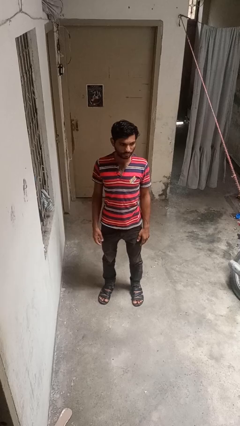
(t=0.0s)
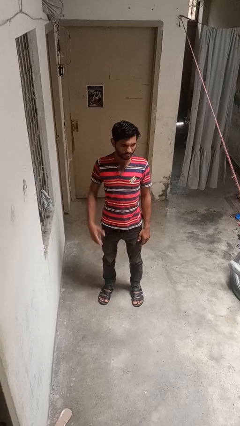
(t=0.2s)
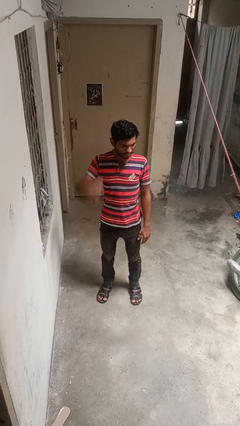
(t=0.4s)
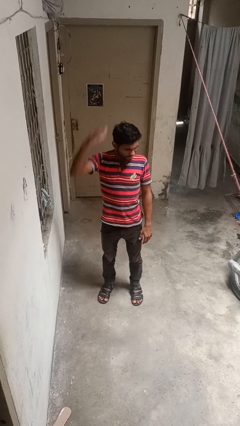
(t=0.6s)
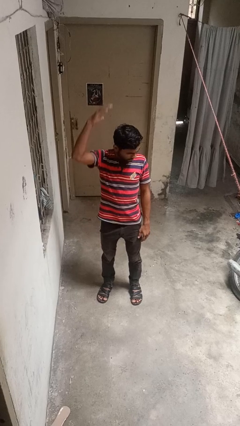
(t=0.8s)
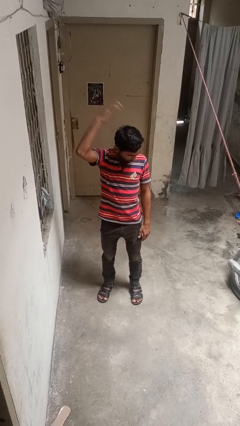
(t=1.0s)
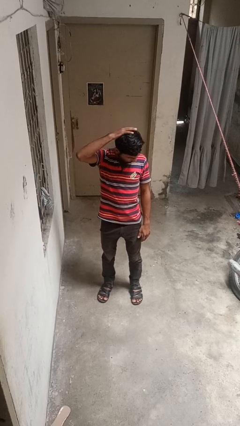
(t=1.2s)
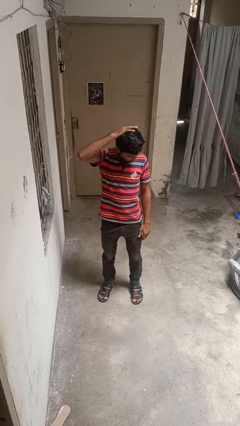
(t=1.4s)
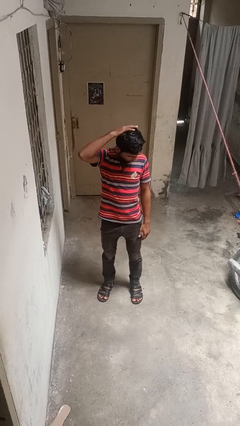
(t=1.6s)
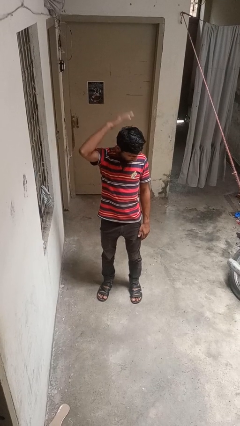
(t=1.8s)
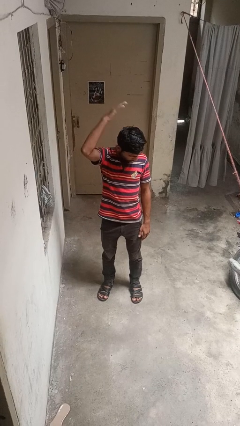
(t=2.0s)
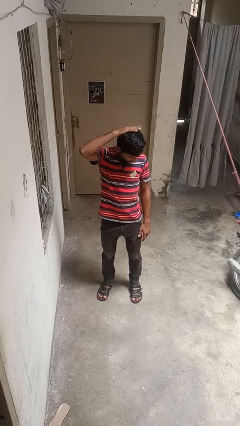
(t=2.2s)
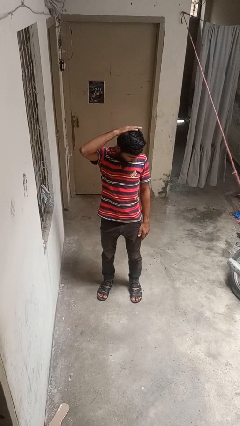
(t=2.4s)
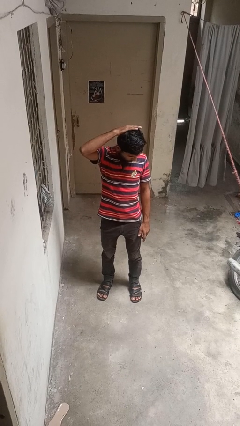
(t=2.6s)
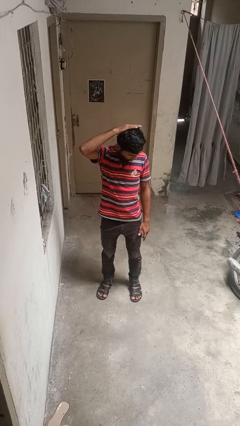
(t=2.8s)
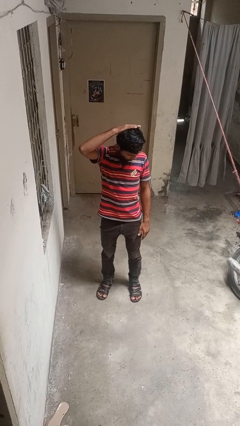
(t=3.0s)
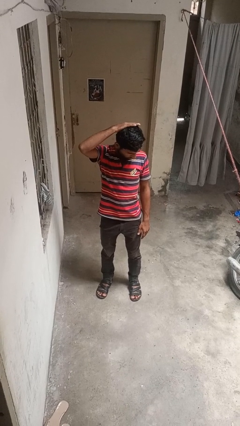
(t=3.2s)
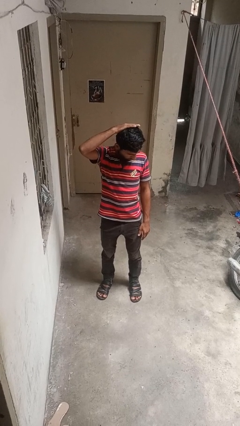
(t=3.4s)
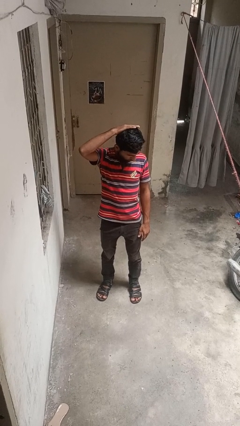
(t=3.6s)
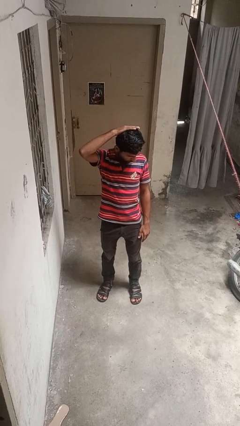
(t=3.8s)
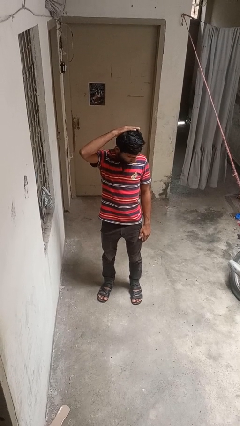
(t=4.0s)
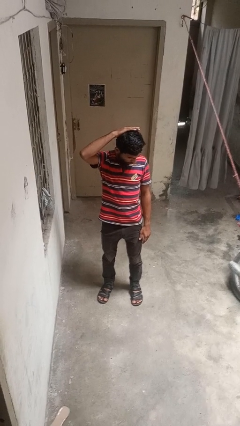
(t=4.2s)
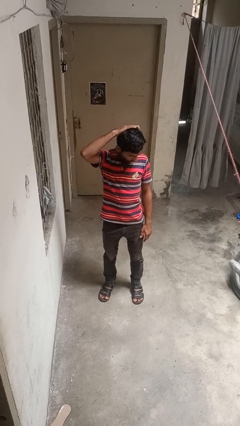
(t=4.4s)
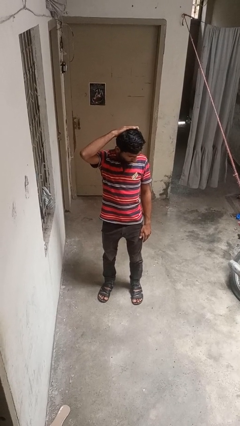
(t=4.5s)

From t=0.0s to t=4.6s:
person pats head

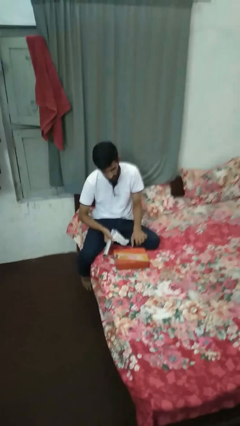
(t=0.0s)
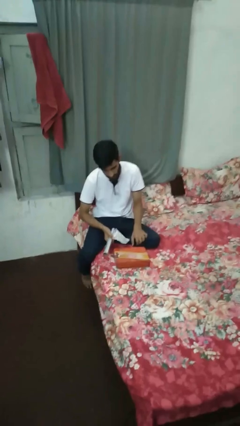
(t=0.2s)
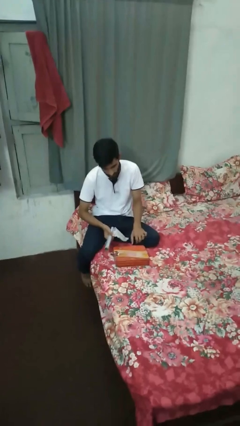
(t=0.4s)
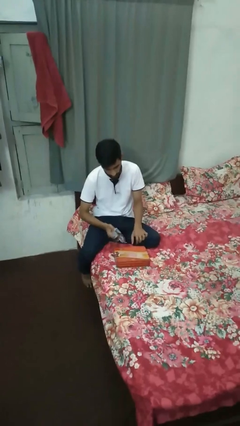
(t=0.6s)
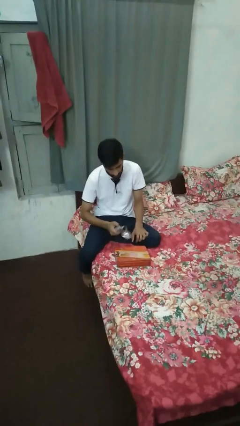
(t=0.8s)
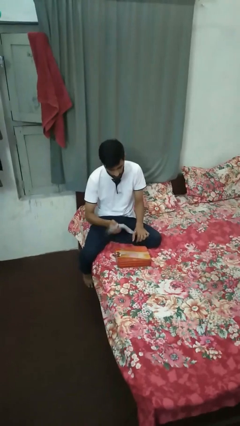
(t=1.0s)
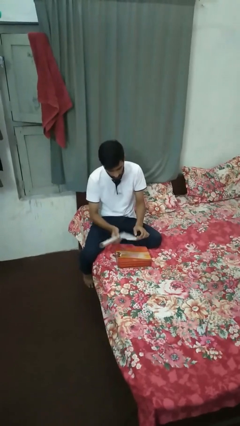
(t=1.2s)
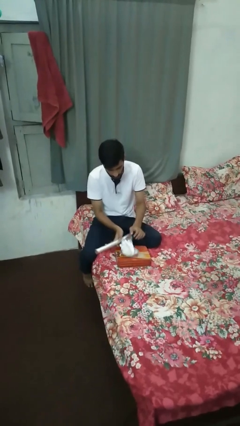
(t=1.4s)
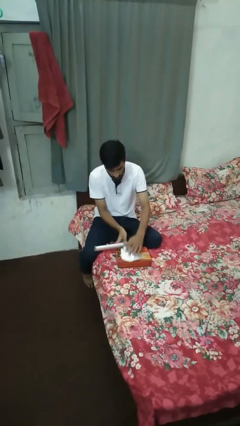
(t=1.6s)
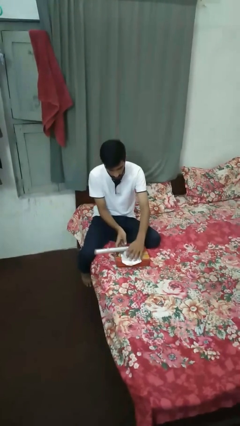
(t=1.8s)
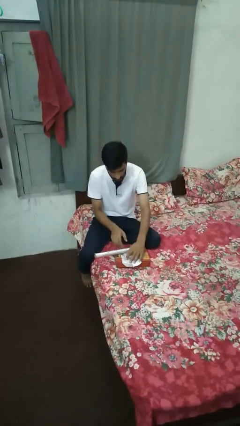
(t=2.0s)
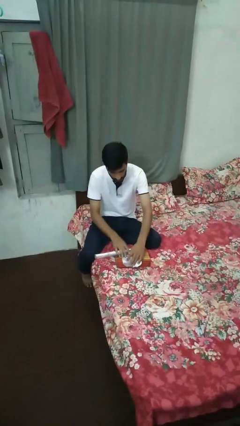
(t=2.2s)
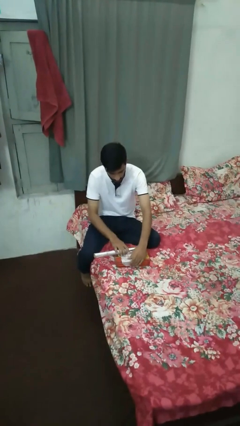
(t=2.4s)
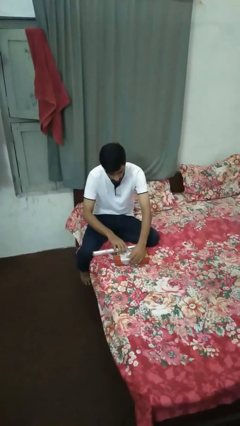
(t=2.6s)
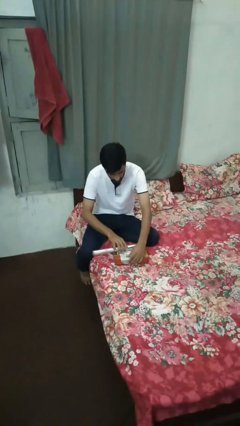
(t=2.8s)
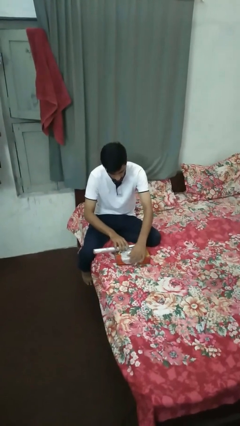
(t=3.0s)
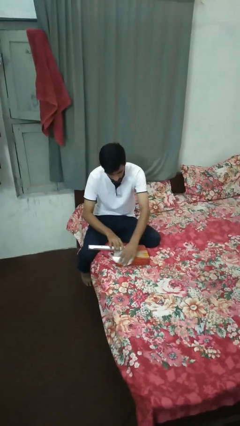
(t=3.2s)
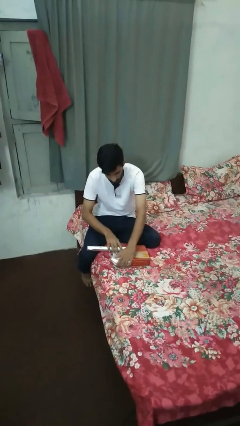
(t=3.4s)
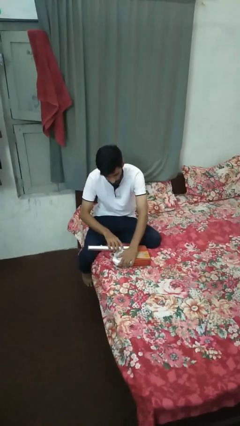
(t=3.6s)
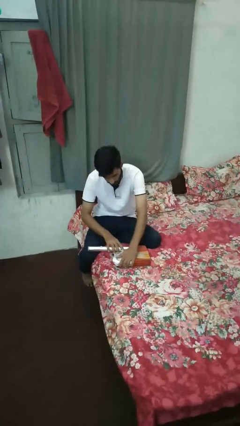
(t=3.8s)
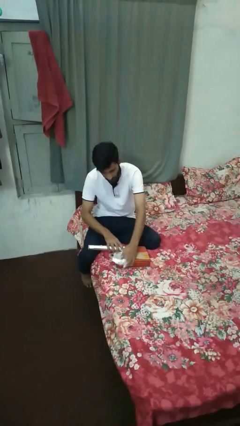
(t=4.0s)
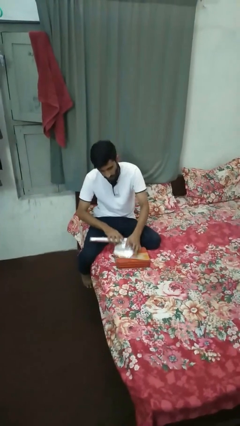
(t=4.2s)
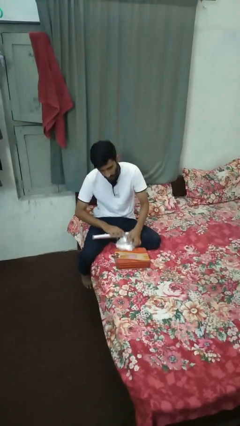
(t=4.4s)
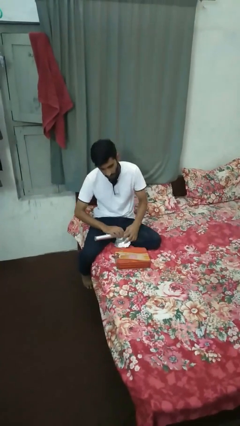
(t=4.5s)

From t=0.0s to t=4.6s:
person wraps box

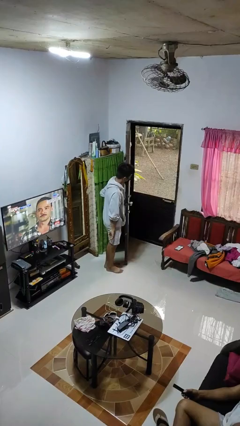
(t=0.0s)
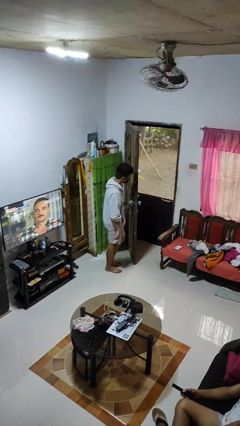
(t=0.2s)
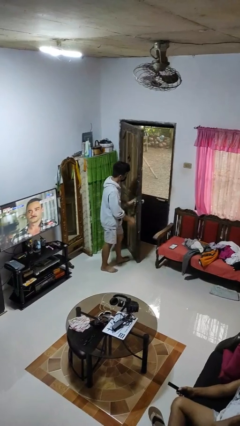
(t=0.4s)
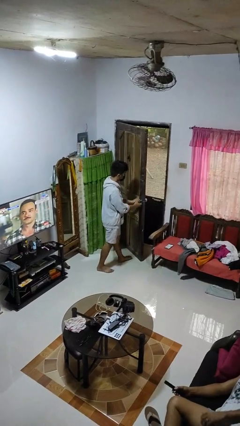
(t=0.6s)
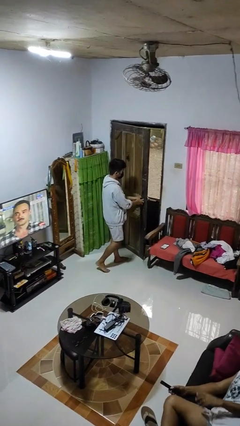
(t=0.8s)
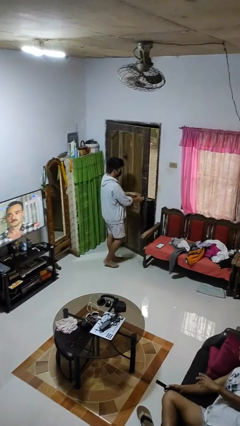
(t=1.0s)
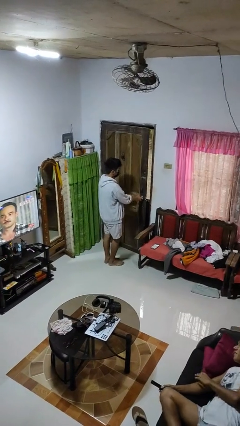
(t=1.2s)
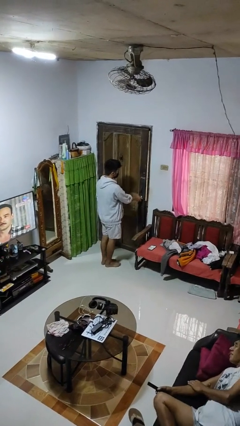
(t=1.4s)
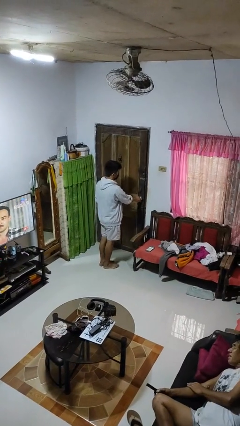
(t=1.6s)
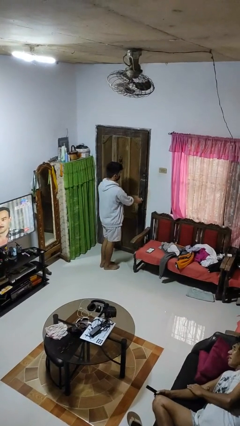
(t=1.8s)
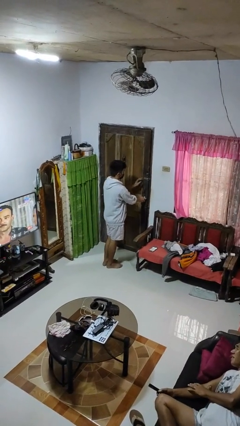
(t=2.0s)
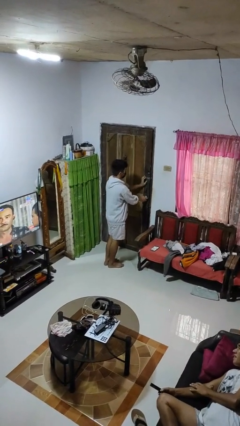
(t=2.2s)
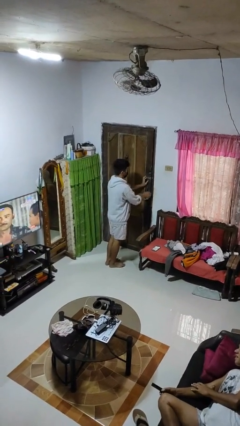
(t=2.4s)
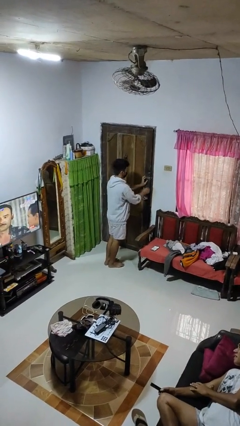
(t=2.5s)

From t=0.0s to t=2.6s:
person closes facility door

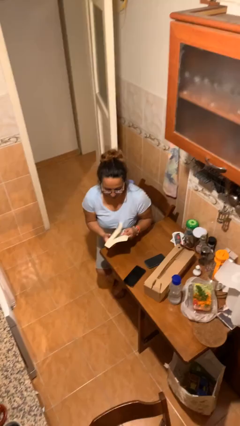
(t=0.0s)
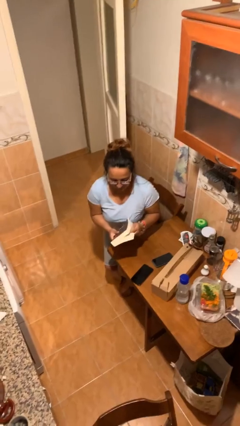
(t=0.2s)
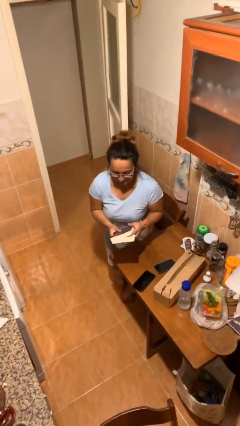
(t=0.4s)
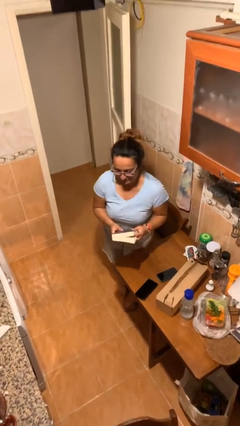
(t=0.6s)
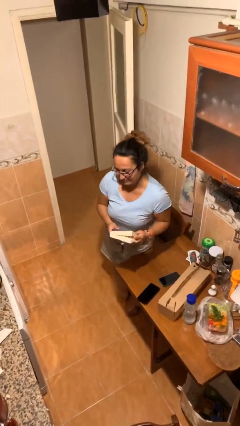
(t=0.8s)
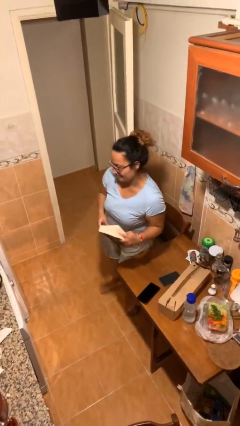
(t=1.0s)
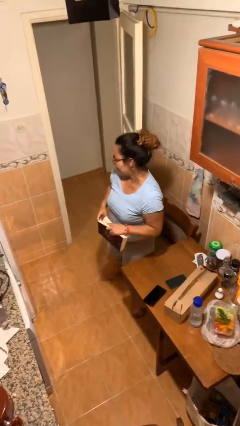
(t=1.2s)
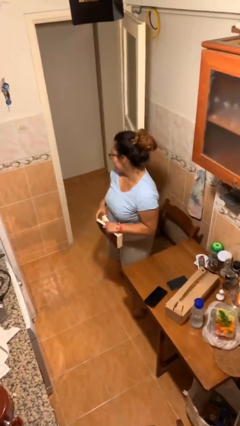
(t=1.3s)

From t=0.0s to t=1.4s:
person stands up

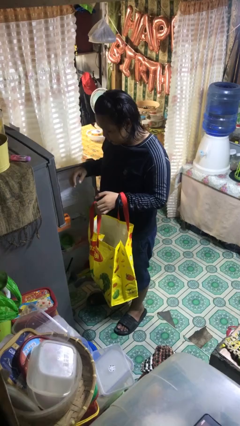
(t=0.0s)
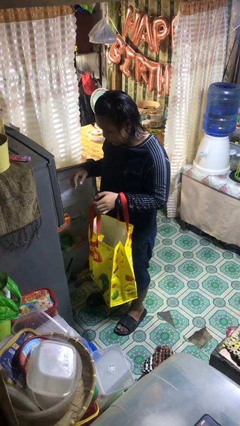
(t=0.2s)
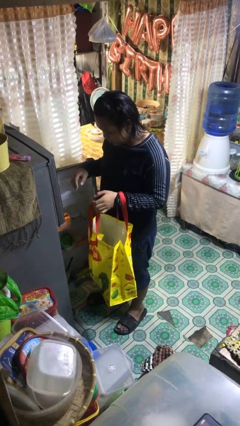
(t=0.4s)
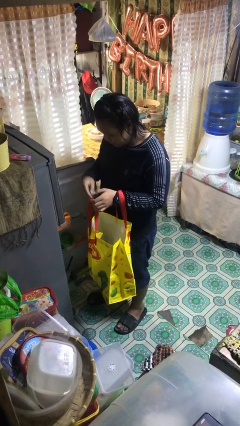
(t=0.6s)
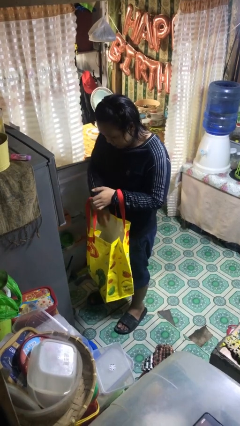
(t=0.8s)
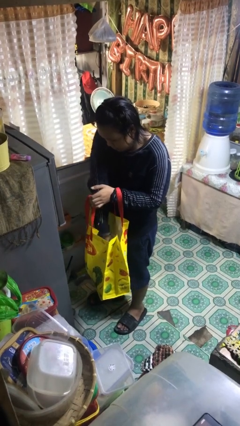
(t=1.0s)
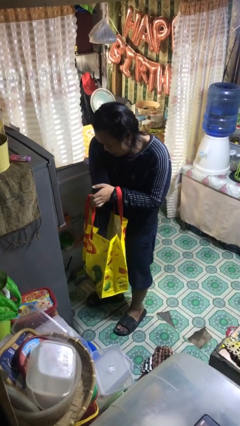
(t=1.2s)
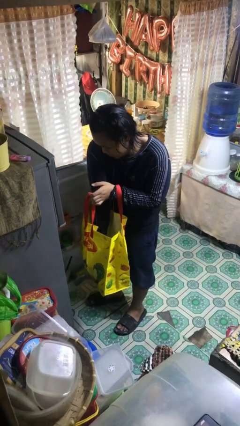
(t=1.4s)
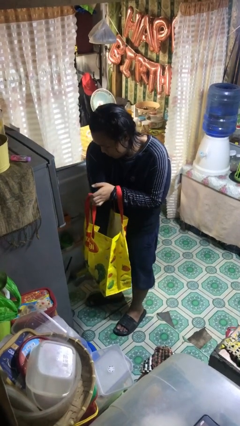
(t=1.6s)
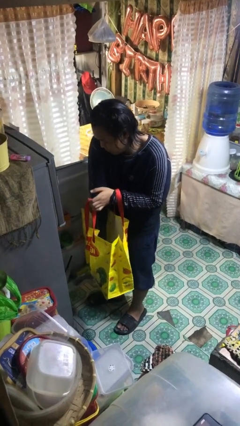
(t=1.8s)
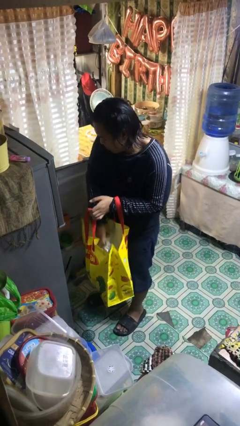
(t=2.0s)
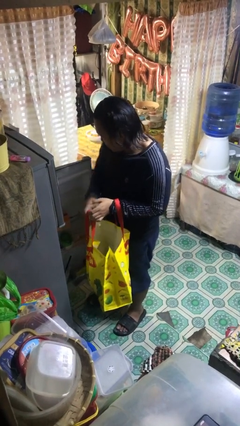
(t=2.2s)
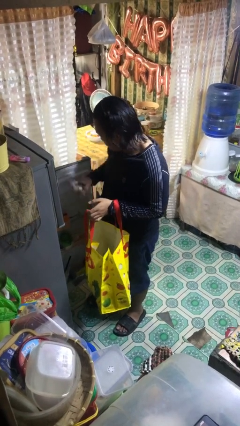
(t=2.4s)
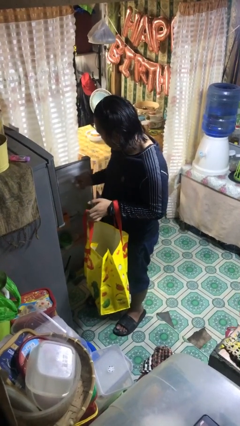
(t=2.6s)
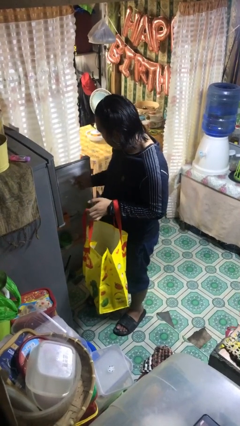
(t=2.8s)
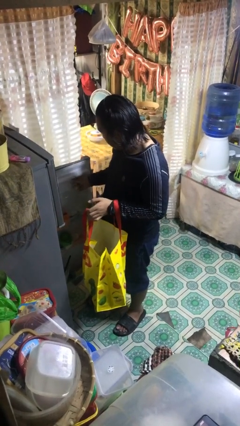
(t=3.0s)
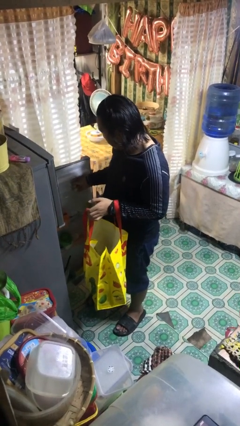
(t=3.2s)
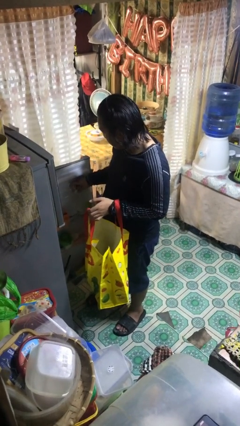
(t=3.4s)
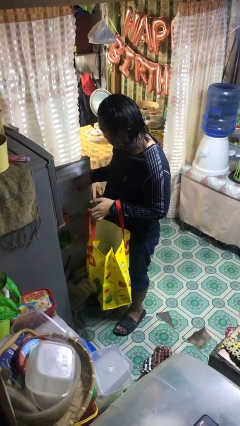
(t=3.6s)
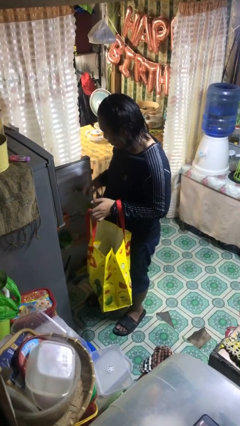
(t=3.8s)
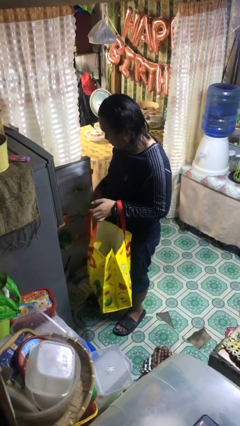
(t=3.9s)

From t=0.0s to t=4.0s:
person loads groceries into refrigerator

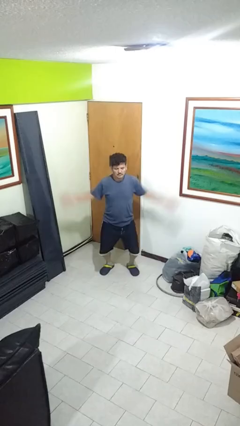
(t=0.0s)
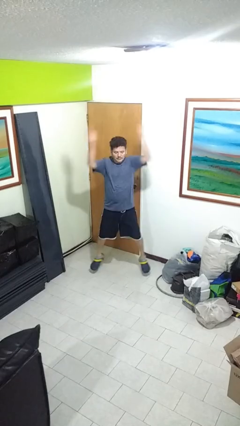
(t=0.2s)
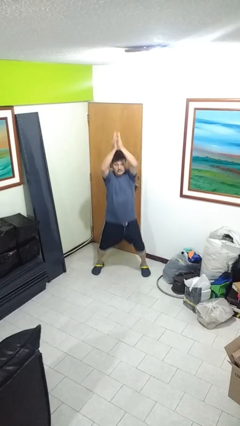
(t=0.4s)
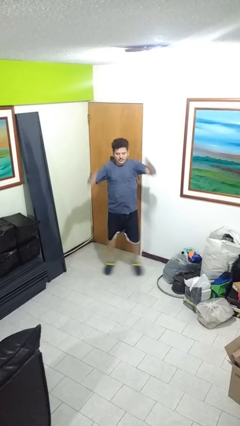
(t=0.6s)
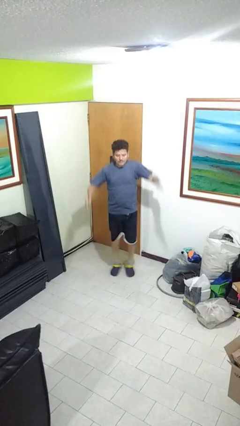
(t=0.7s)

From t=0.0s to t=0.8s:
person exercises with jumping jacks
